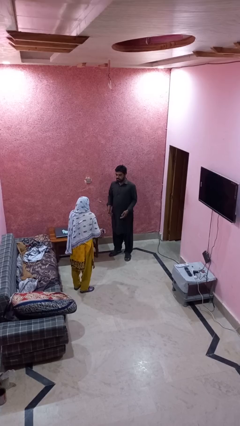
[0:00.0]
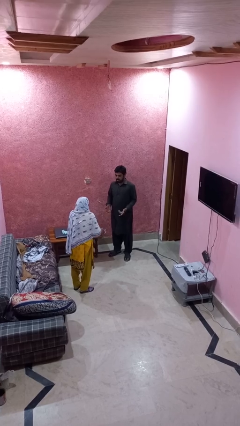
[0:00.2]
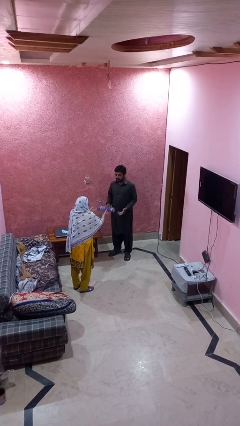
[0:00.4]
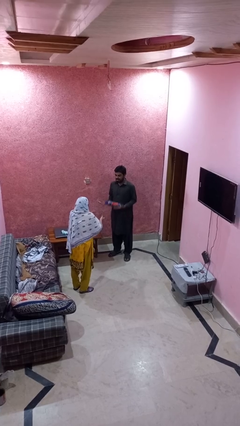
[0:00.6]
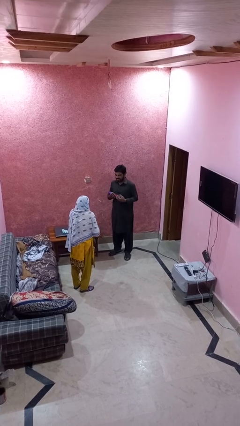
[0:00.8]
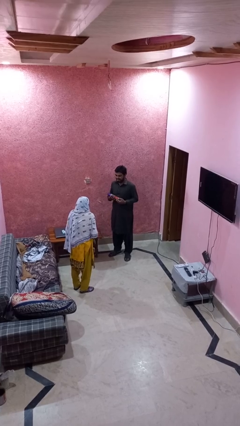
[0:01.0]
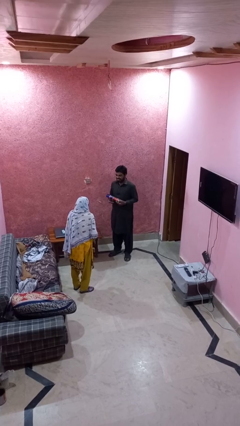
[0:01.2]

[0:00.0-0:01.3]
person catches object from person

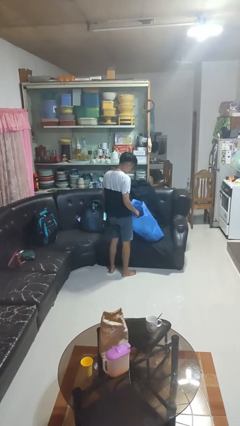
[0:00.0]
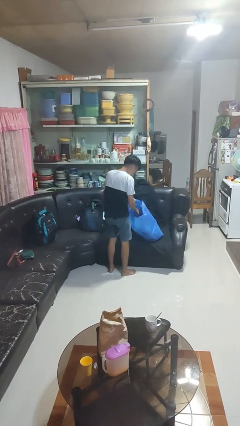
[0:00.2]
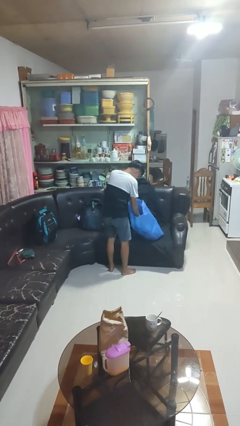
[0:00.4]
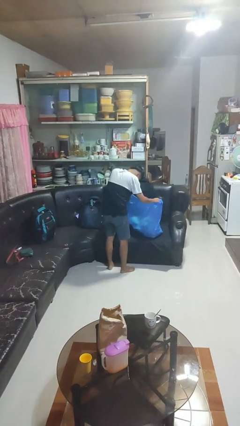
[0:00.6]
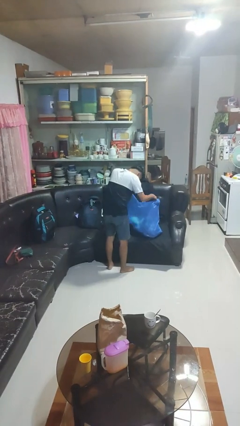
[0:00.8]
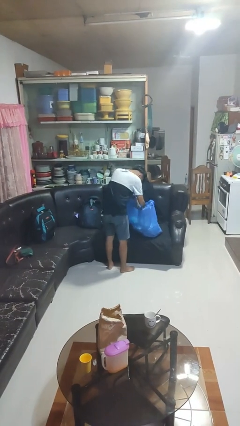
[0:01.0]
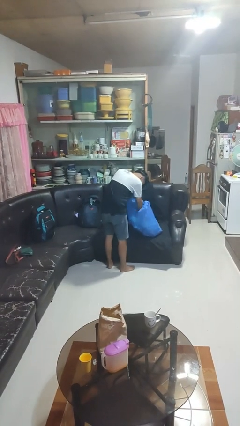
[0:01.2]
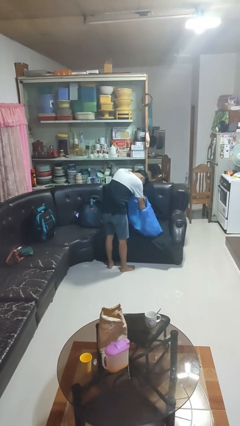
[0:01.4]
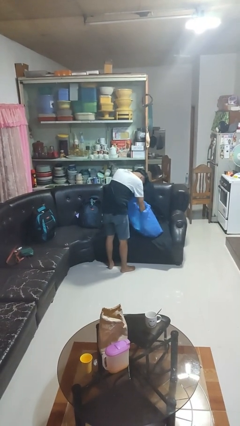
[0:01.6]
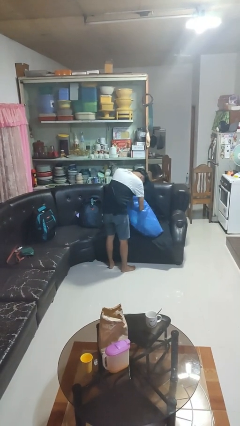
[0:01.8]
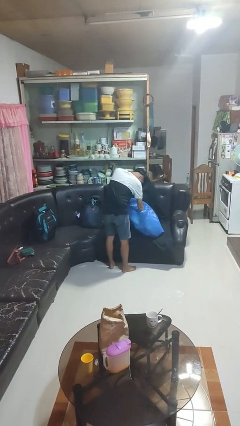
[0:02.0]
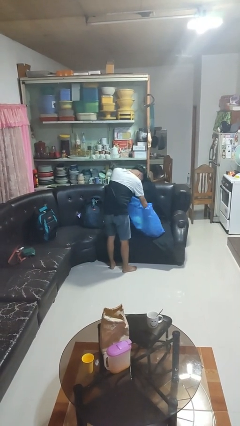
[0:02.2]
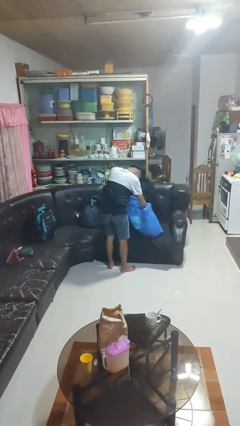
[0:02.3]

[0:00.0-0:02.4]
person searches in bag

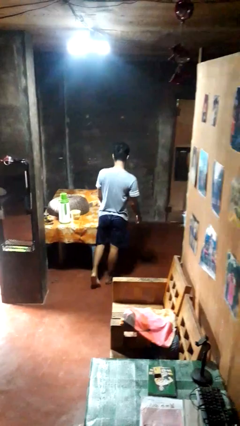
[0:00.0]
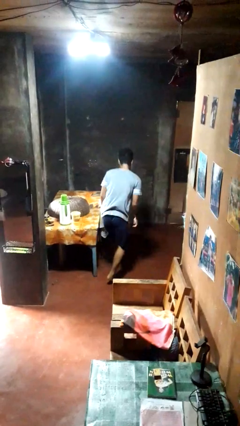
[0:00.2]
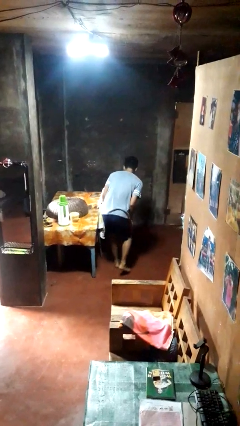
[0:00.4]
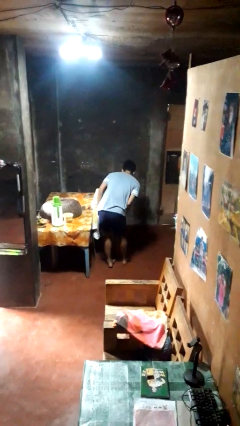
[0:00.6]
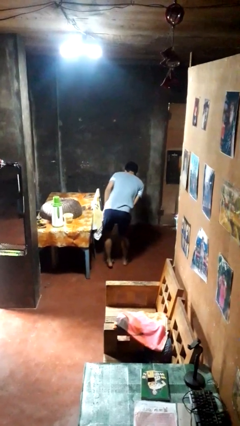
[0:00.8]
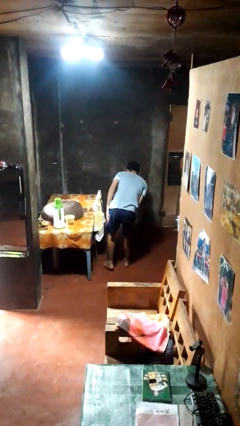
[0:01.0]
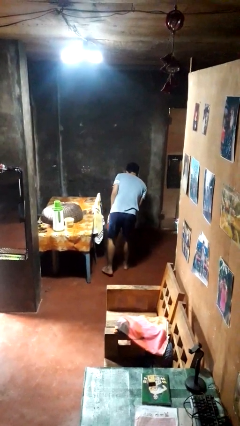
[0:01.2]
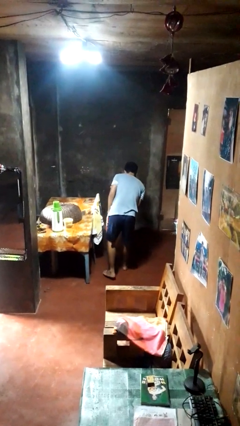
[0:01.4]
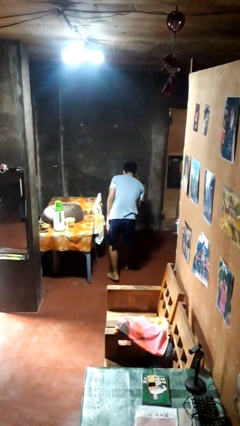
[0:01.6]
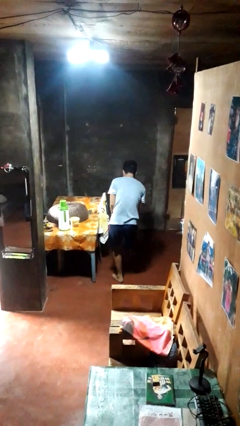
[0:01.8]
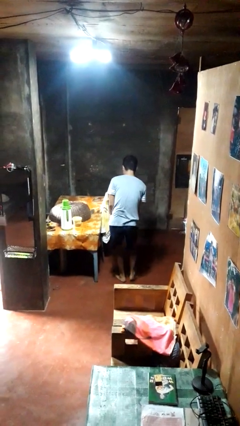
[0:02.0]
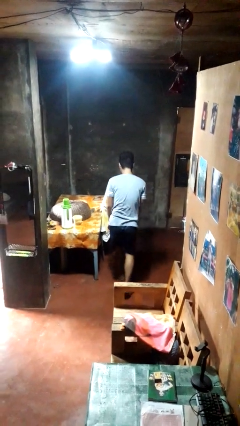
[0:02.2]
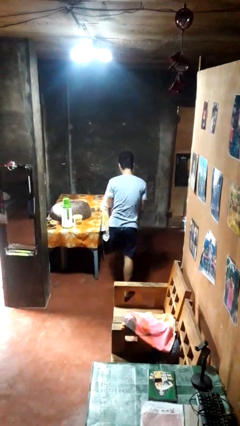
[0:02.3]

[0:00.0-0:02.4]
person bumps into table

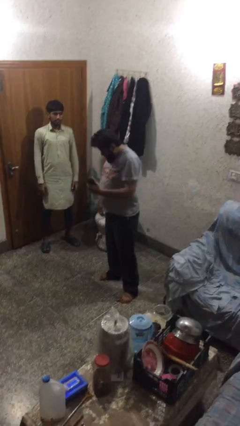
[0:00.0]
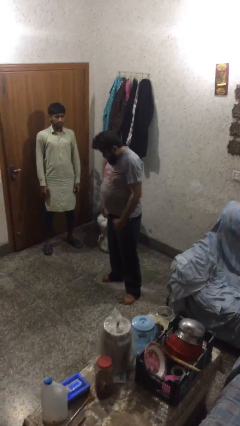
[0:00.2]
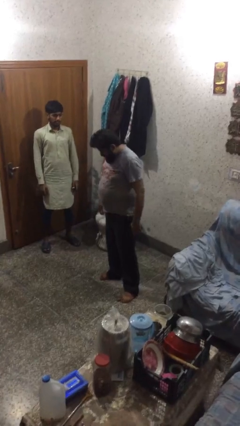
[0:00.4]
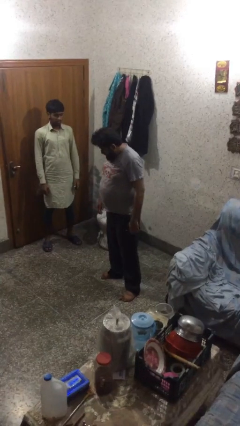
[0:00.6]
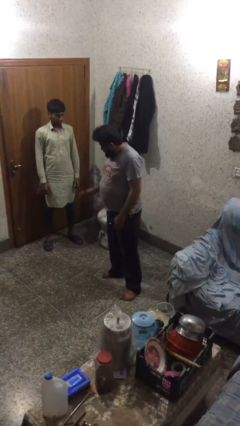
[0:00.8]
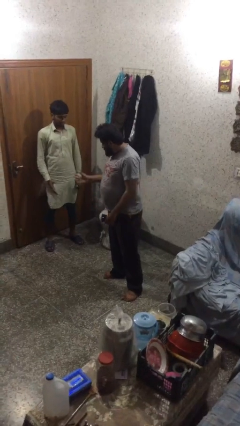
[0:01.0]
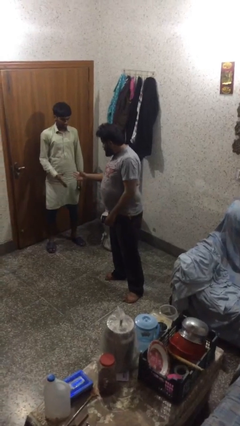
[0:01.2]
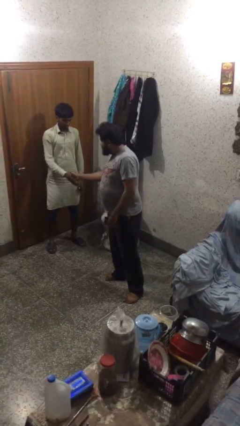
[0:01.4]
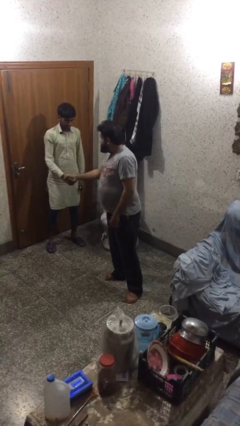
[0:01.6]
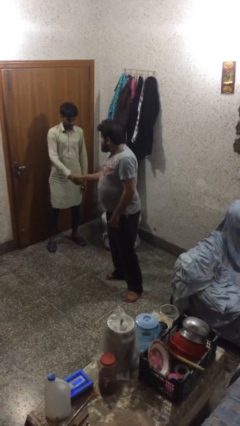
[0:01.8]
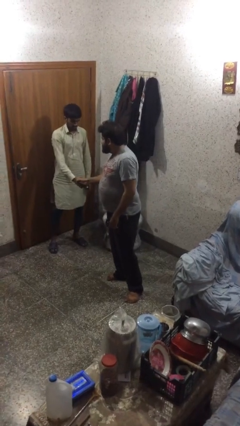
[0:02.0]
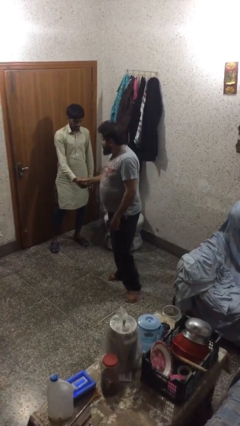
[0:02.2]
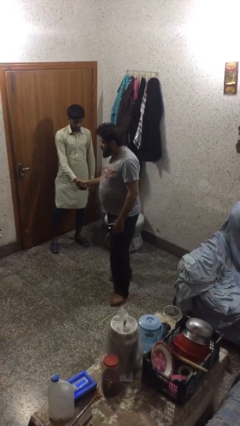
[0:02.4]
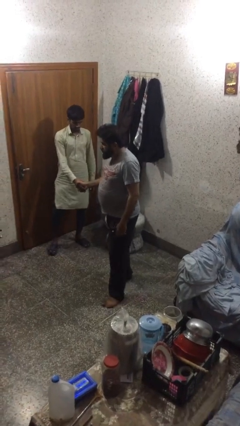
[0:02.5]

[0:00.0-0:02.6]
person shakes hand

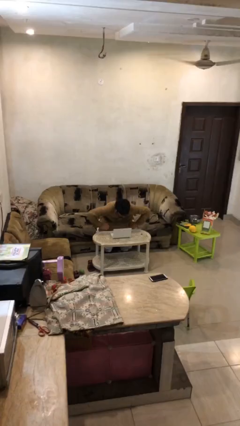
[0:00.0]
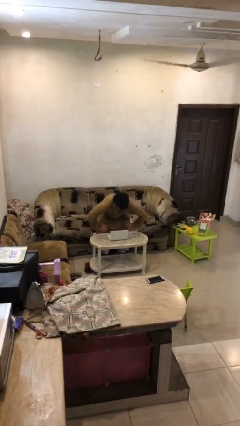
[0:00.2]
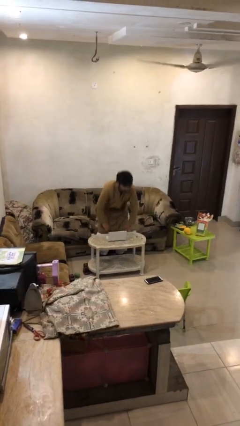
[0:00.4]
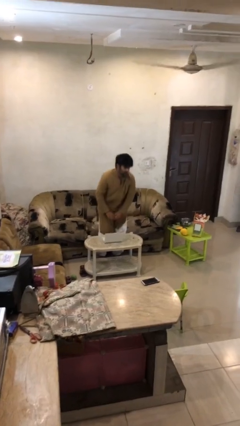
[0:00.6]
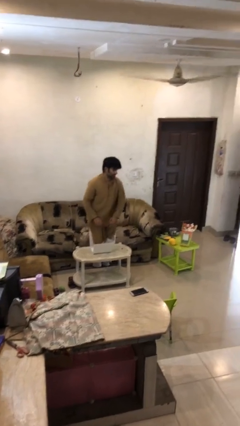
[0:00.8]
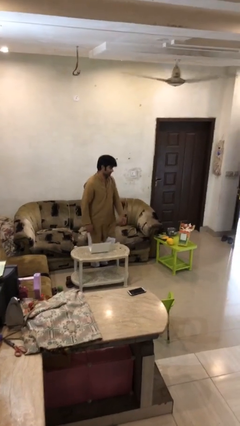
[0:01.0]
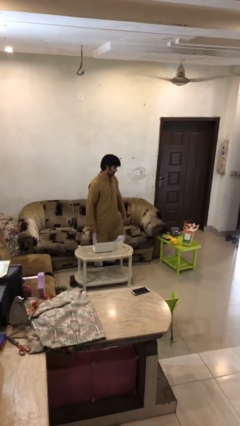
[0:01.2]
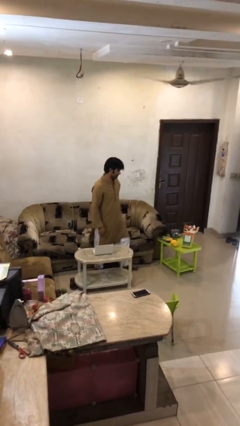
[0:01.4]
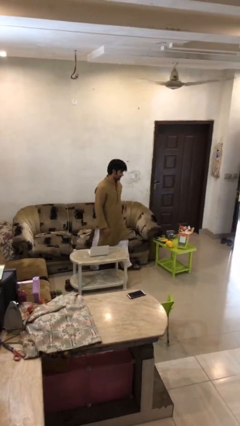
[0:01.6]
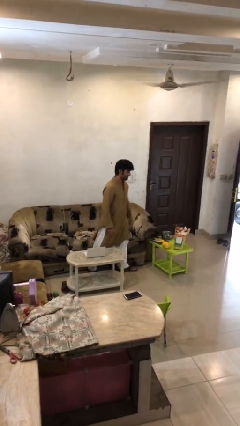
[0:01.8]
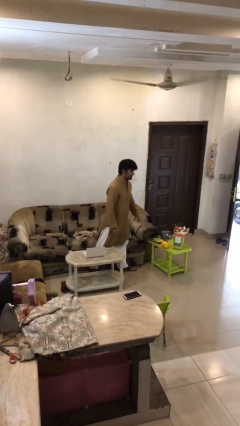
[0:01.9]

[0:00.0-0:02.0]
person stands up

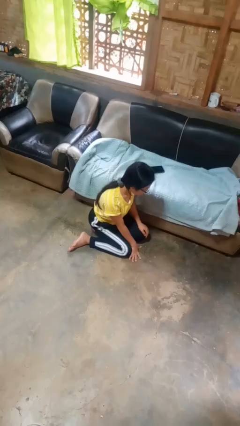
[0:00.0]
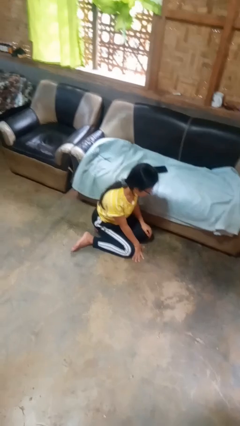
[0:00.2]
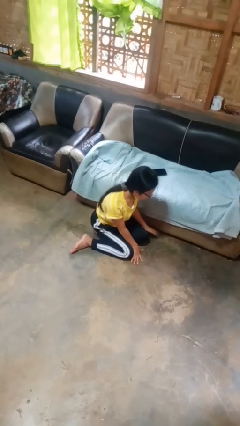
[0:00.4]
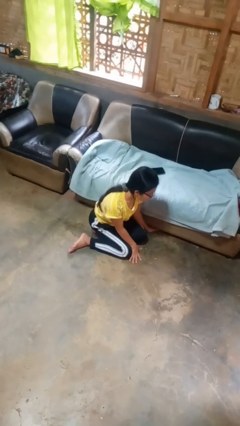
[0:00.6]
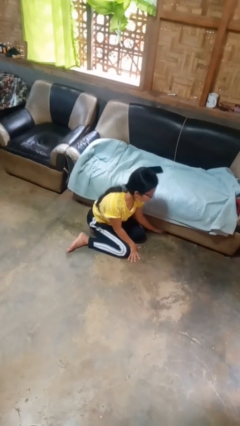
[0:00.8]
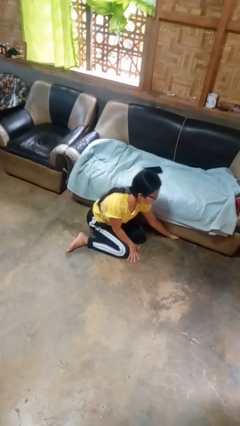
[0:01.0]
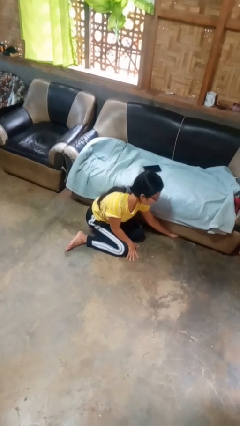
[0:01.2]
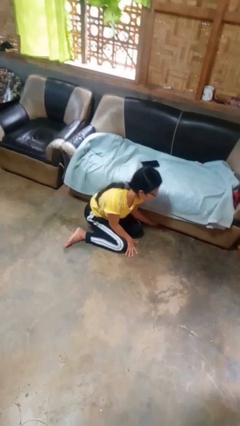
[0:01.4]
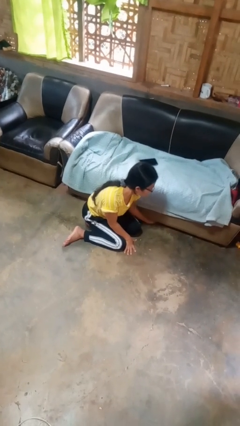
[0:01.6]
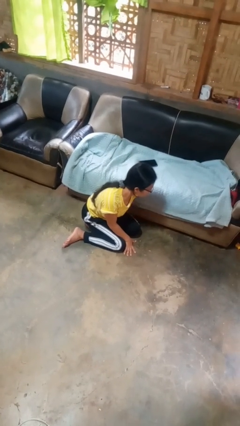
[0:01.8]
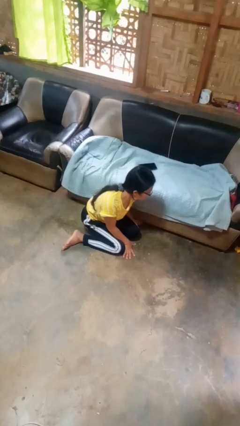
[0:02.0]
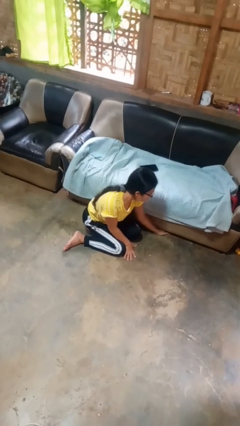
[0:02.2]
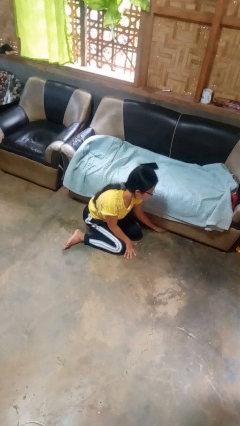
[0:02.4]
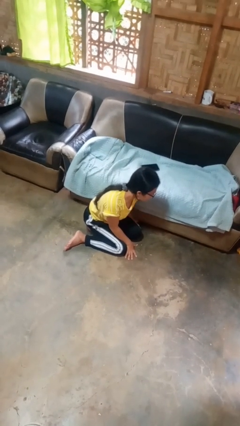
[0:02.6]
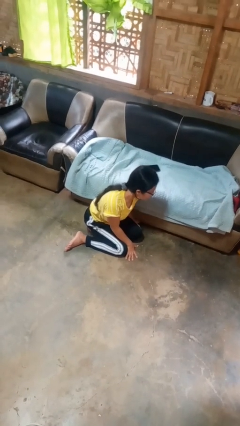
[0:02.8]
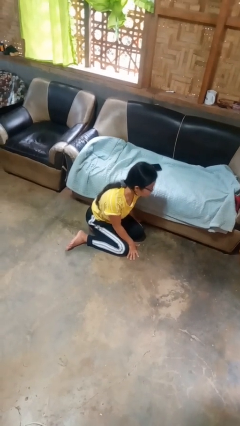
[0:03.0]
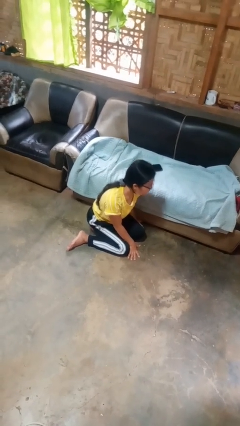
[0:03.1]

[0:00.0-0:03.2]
person searches under couch

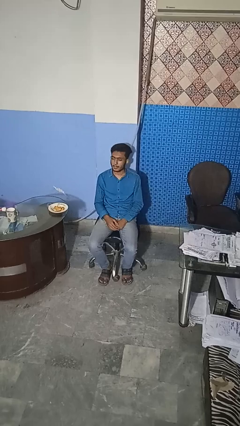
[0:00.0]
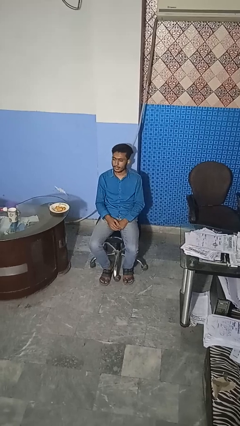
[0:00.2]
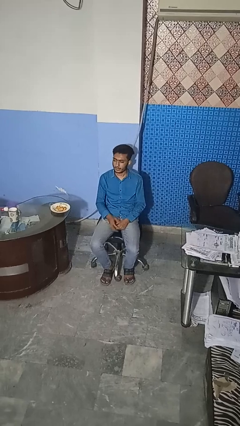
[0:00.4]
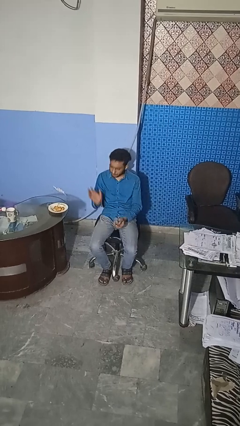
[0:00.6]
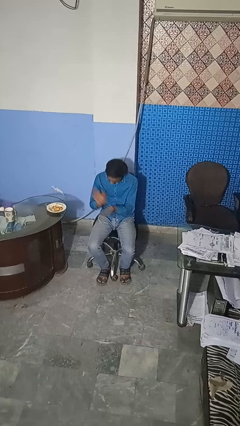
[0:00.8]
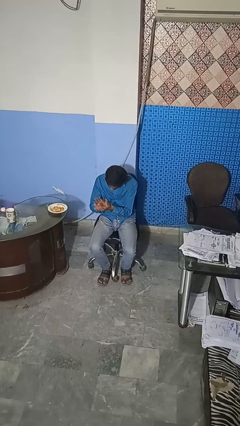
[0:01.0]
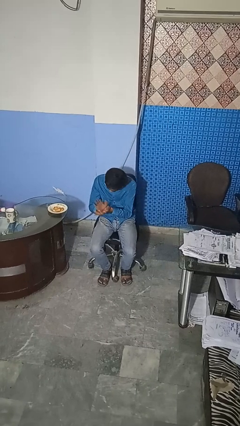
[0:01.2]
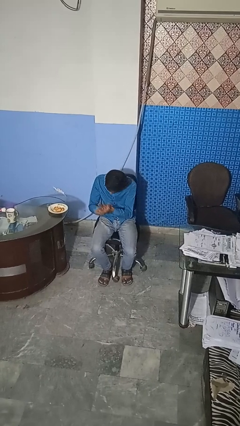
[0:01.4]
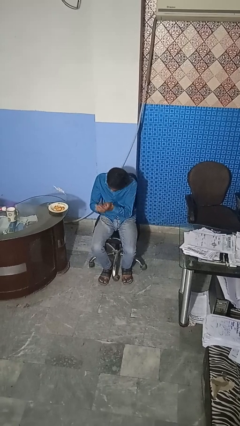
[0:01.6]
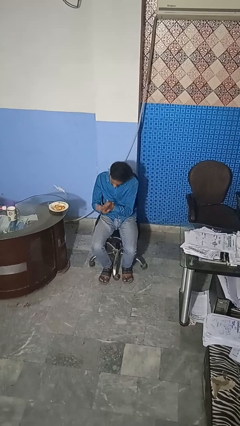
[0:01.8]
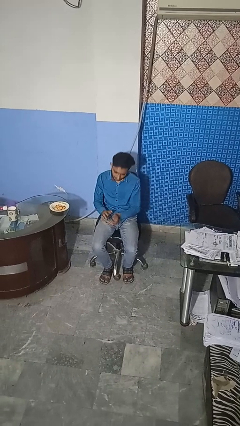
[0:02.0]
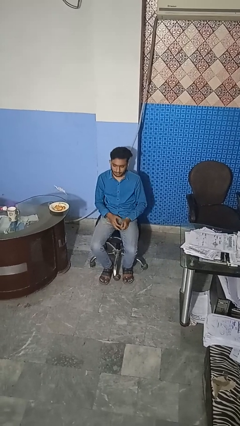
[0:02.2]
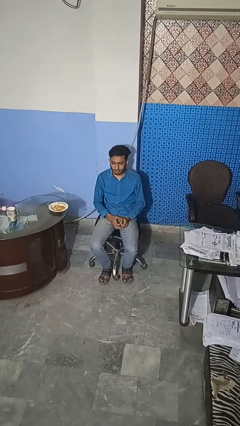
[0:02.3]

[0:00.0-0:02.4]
person claps hands

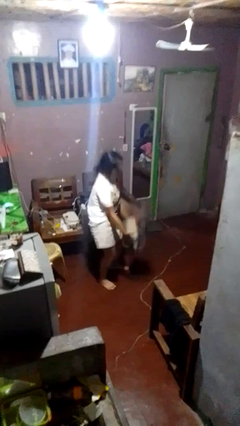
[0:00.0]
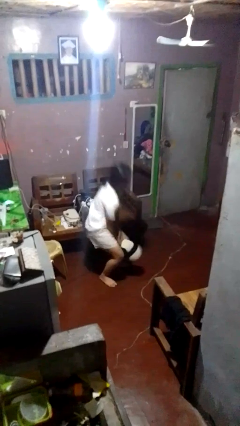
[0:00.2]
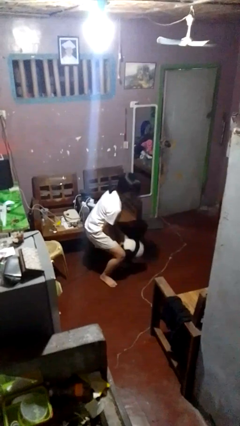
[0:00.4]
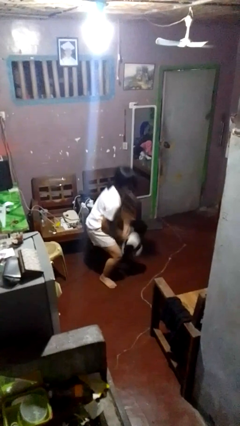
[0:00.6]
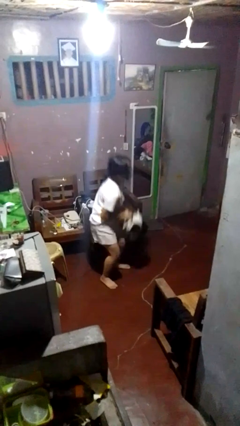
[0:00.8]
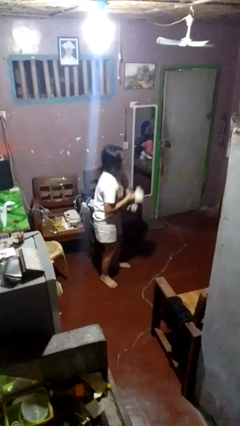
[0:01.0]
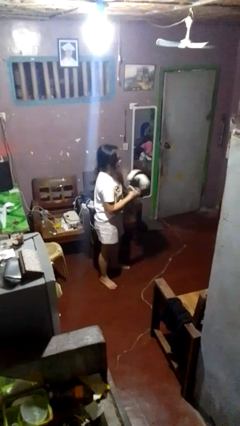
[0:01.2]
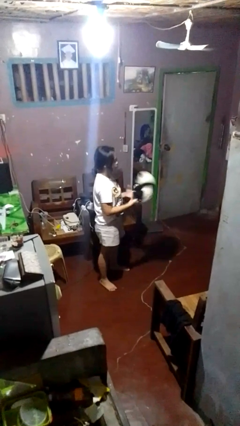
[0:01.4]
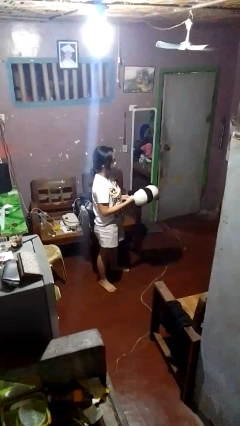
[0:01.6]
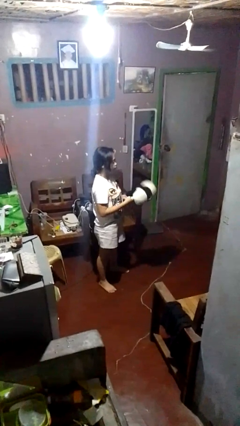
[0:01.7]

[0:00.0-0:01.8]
person catches dropped object
